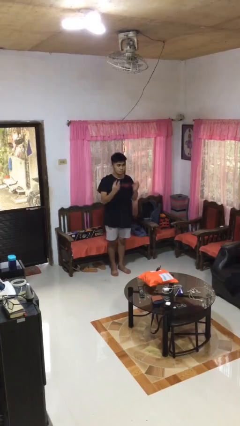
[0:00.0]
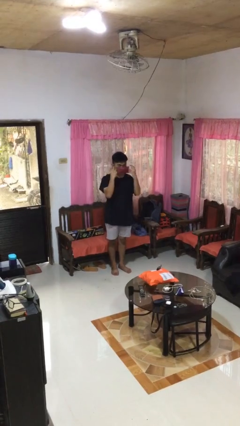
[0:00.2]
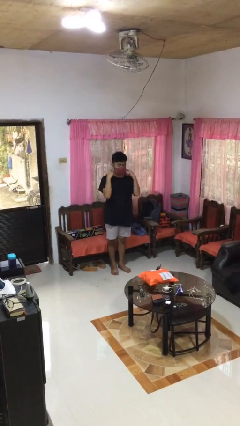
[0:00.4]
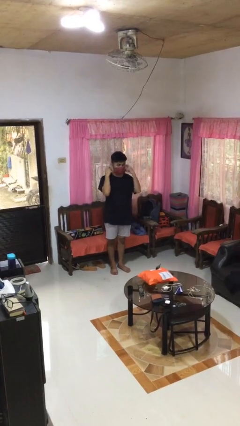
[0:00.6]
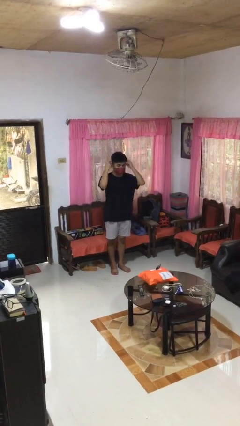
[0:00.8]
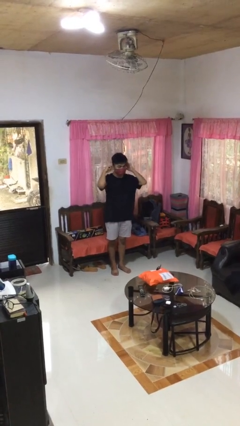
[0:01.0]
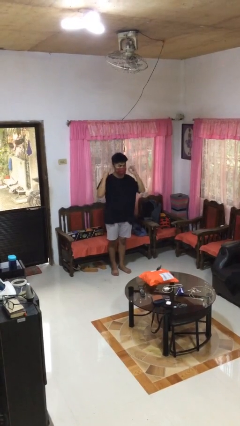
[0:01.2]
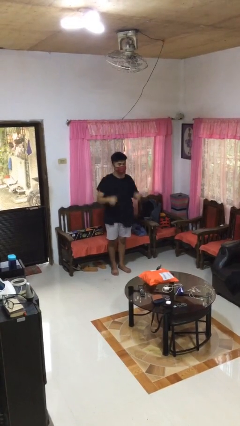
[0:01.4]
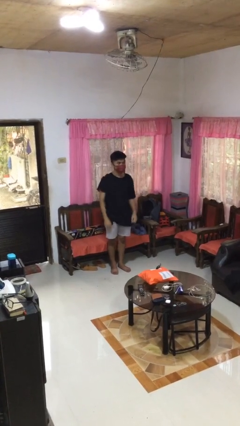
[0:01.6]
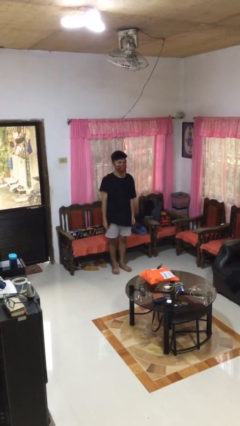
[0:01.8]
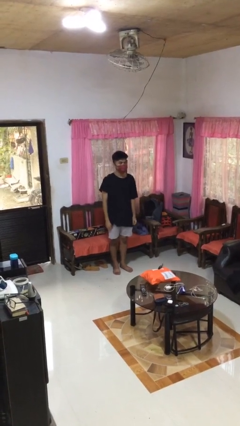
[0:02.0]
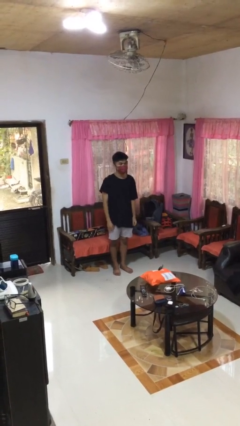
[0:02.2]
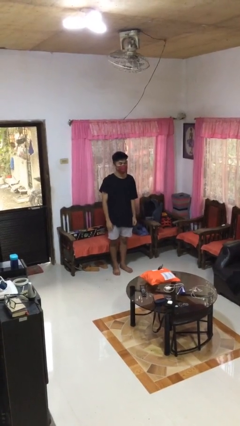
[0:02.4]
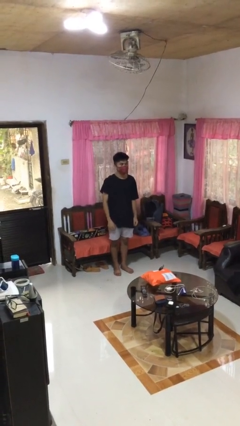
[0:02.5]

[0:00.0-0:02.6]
person puts on facemask

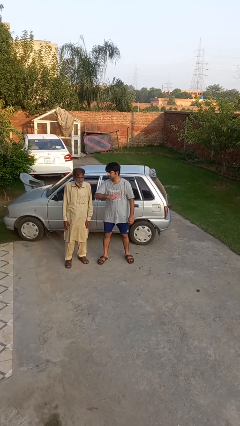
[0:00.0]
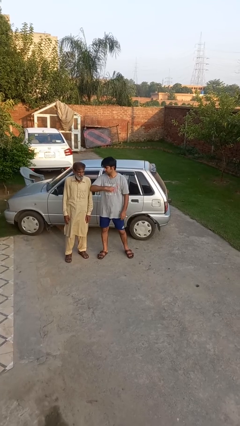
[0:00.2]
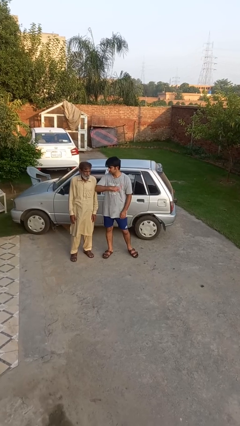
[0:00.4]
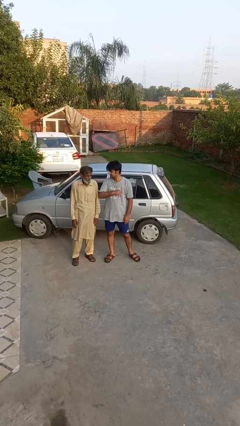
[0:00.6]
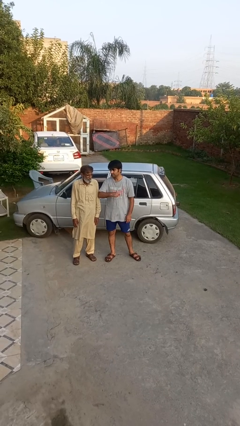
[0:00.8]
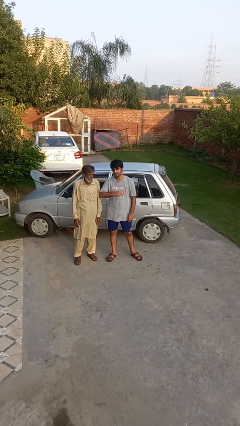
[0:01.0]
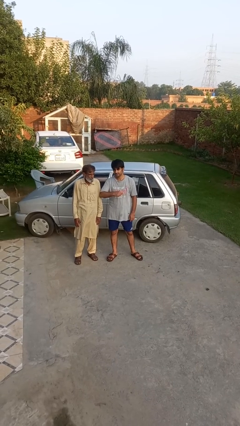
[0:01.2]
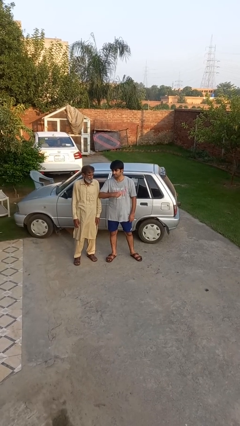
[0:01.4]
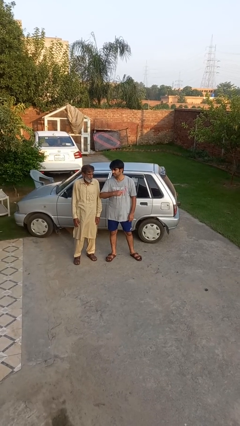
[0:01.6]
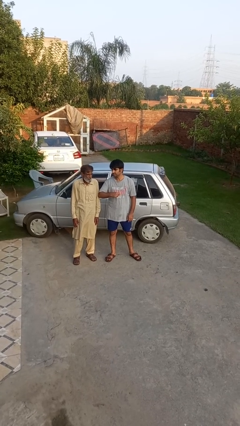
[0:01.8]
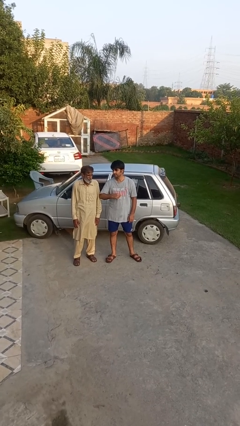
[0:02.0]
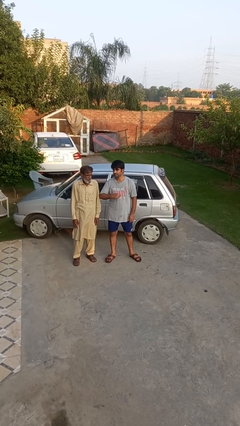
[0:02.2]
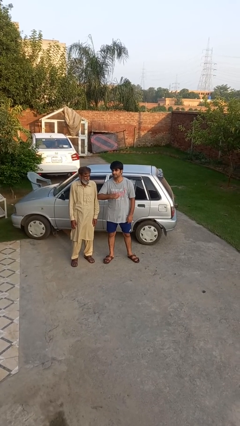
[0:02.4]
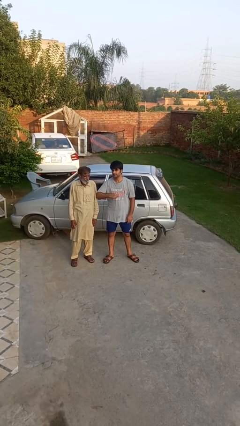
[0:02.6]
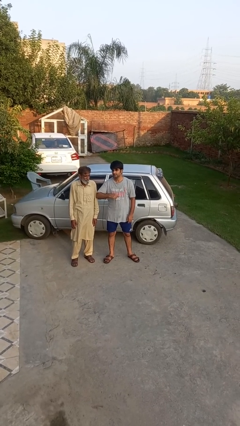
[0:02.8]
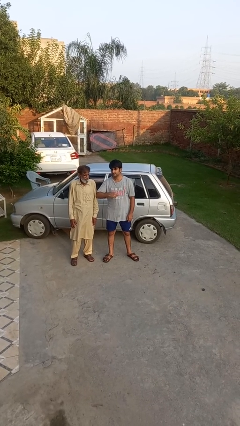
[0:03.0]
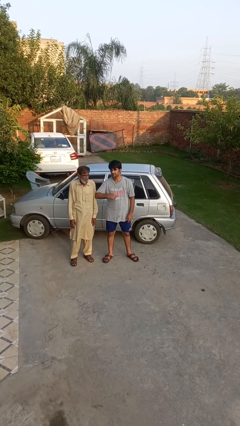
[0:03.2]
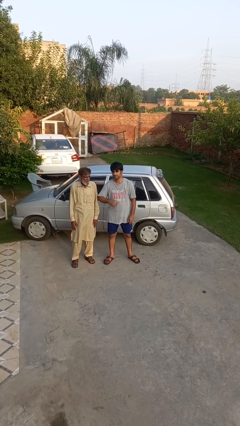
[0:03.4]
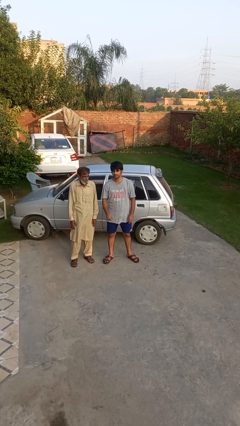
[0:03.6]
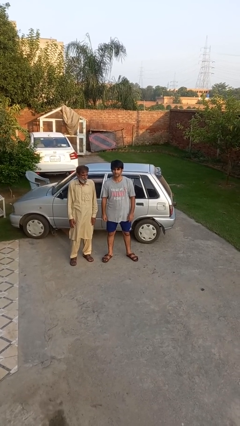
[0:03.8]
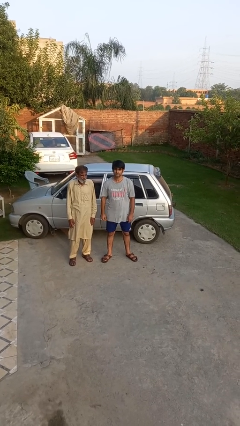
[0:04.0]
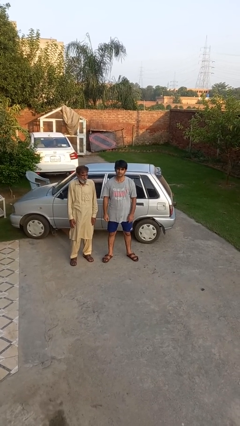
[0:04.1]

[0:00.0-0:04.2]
person nudges person with elbow

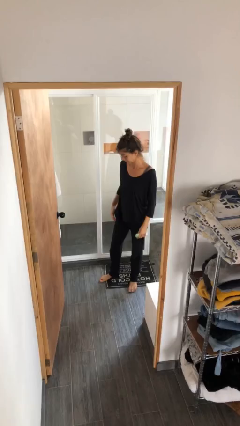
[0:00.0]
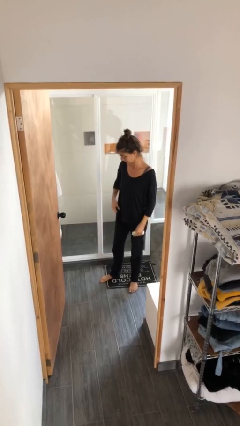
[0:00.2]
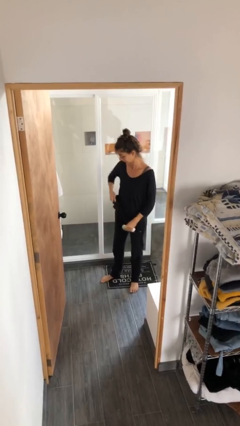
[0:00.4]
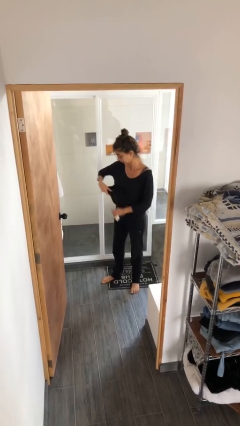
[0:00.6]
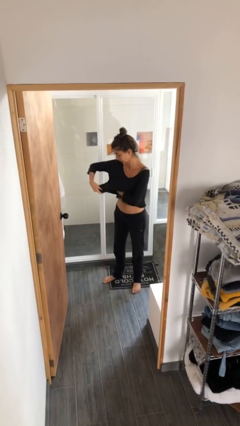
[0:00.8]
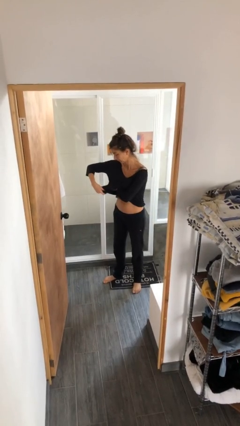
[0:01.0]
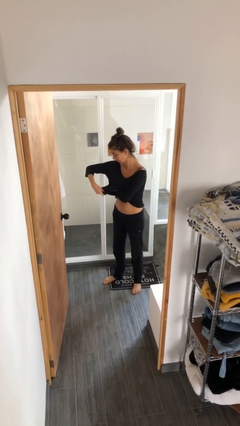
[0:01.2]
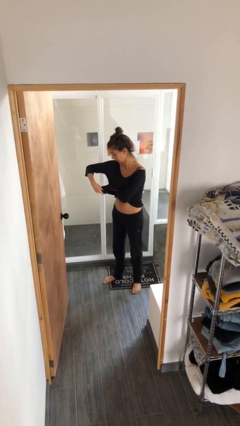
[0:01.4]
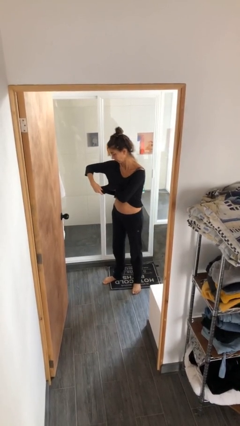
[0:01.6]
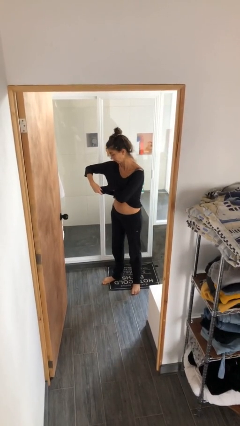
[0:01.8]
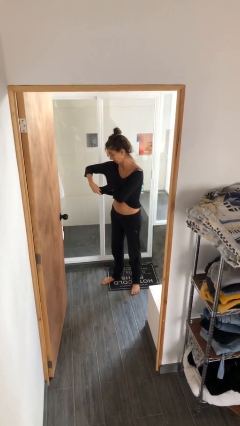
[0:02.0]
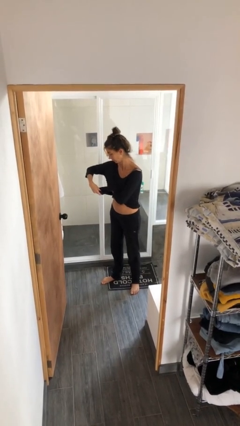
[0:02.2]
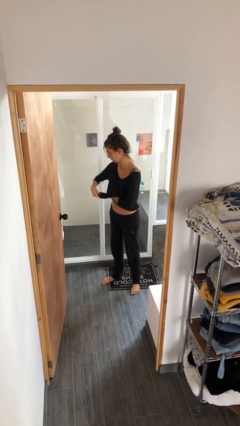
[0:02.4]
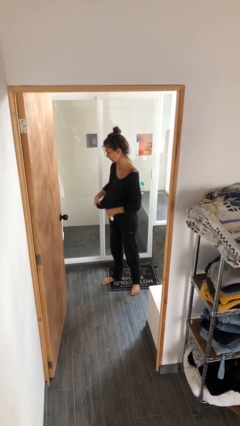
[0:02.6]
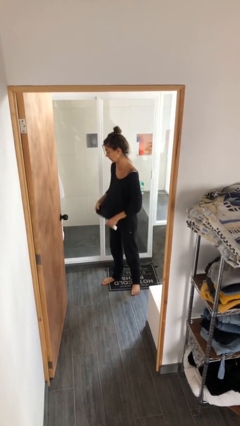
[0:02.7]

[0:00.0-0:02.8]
person applies deodorant

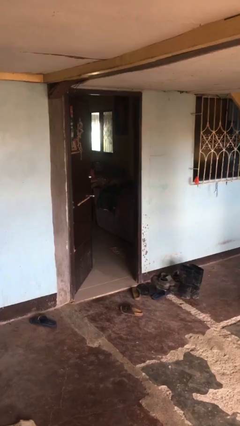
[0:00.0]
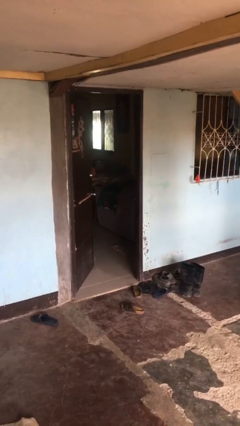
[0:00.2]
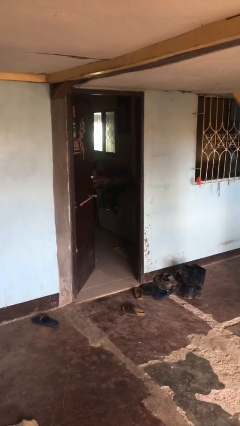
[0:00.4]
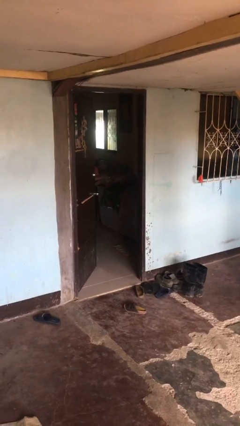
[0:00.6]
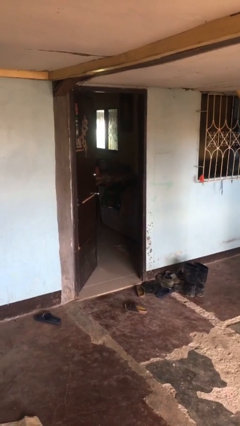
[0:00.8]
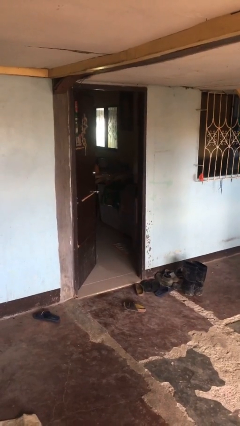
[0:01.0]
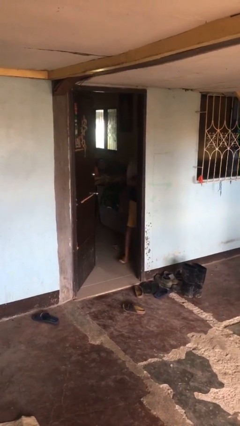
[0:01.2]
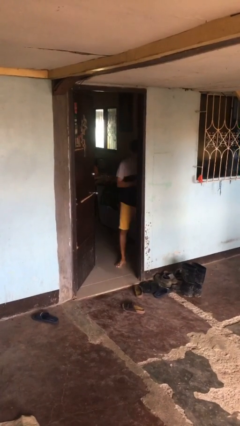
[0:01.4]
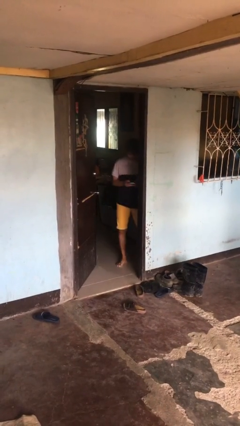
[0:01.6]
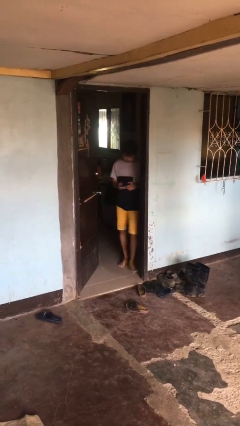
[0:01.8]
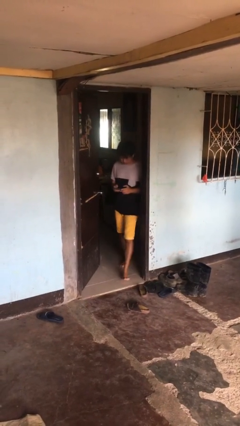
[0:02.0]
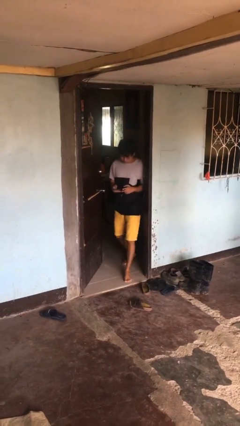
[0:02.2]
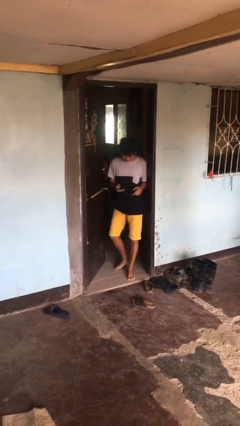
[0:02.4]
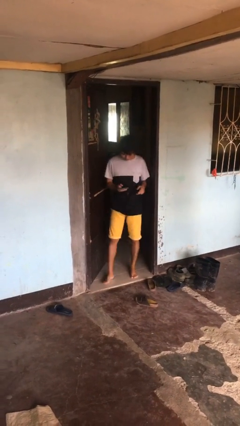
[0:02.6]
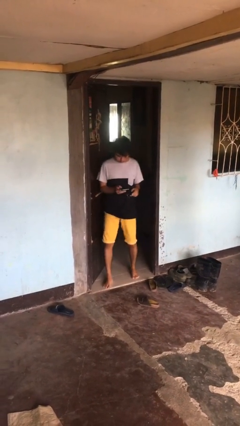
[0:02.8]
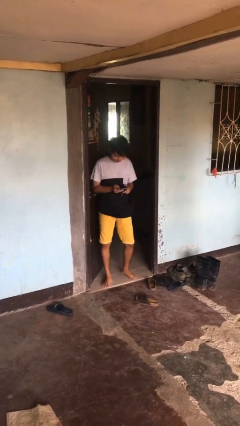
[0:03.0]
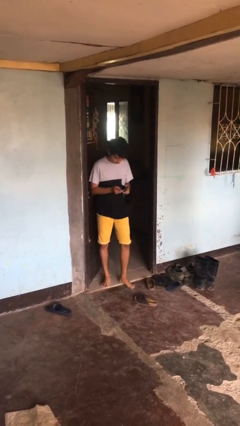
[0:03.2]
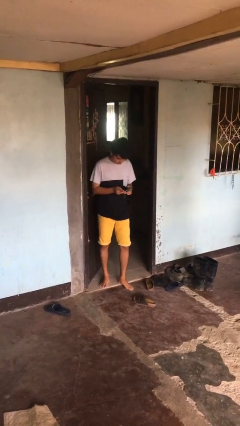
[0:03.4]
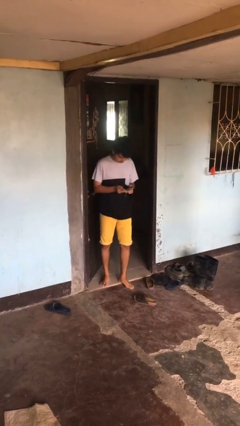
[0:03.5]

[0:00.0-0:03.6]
person enters scene through structure

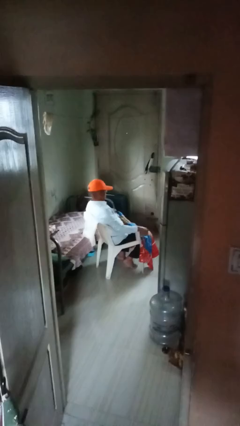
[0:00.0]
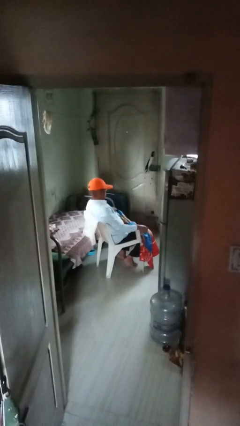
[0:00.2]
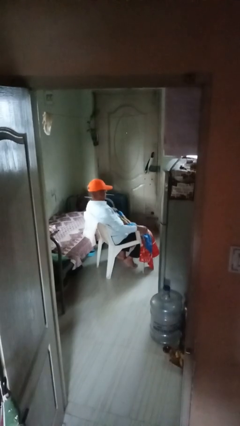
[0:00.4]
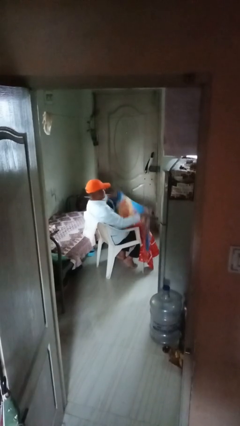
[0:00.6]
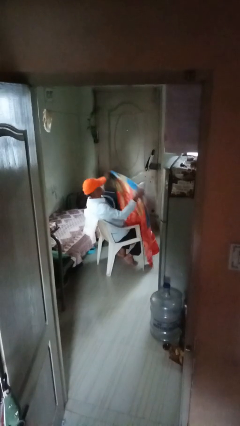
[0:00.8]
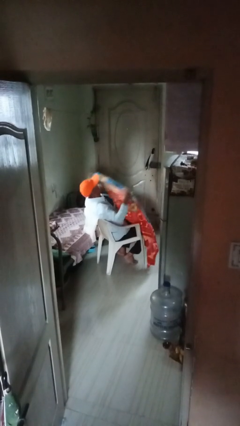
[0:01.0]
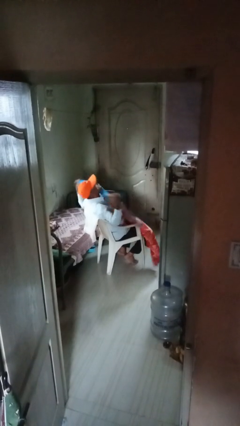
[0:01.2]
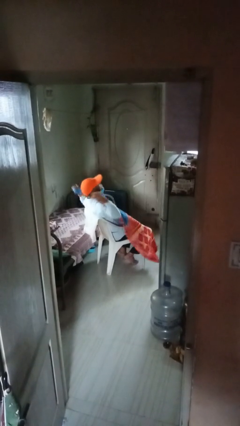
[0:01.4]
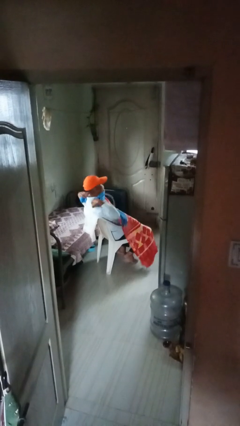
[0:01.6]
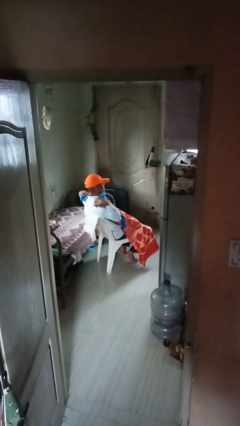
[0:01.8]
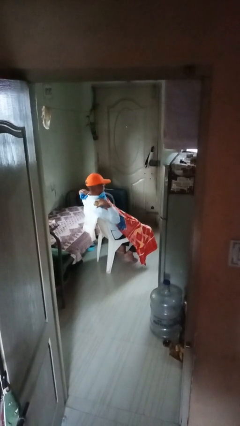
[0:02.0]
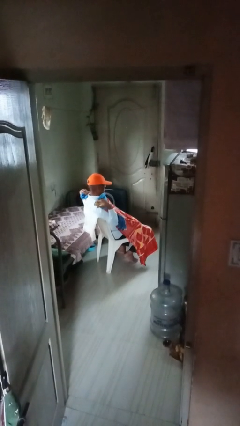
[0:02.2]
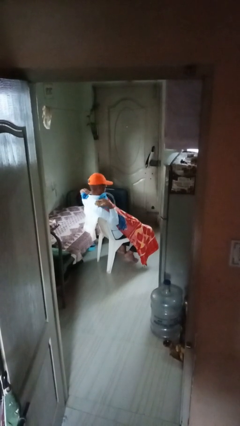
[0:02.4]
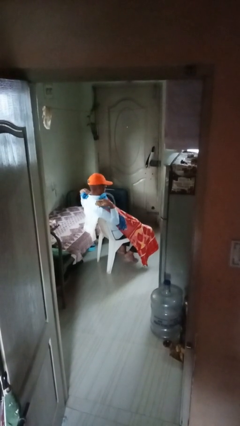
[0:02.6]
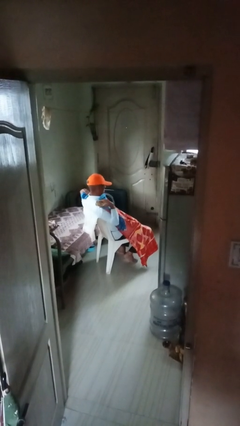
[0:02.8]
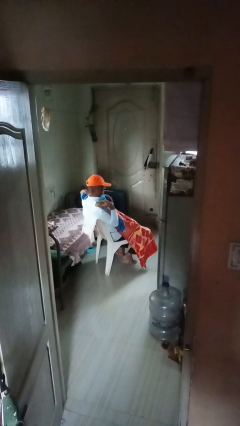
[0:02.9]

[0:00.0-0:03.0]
person covers with blanket

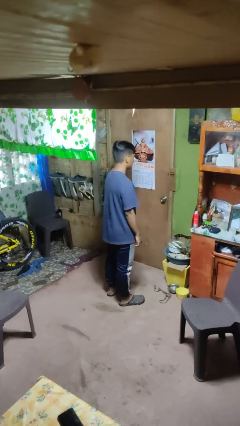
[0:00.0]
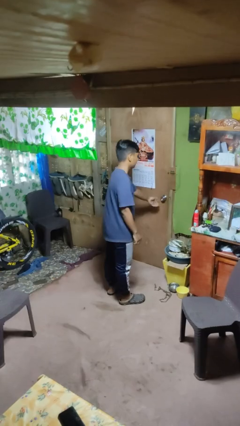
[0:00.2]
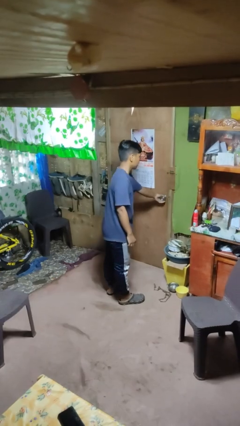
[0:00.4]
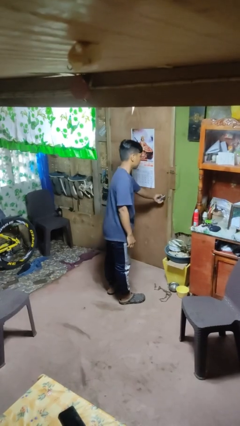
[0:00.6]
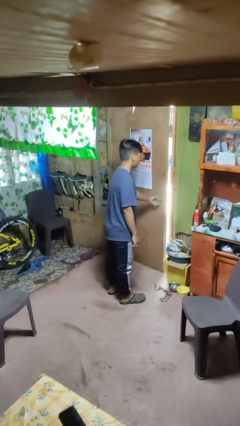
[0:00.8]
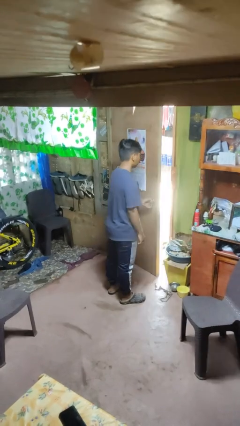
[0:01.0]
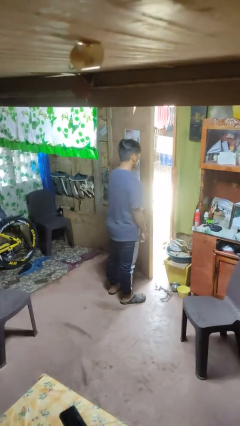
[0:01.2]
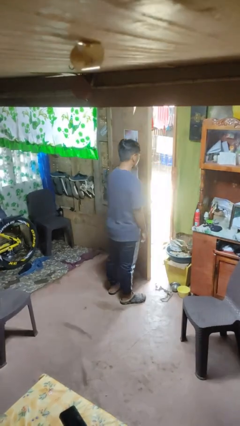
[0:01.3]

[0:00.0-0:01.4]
person opens facility door
